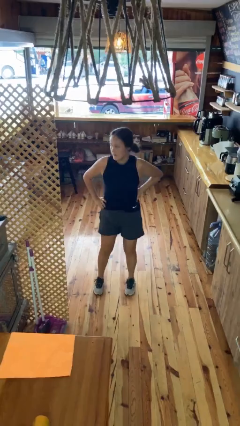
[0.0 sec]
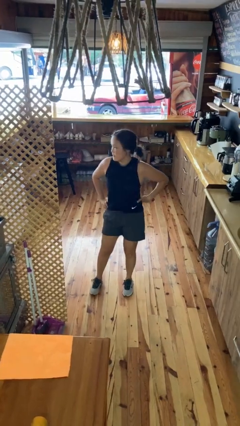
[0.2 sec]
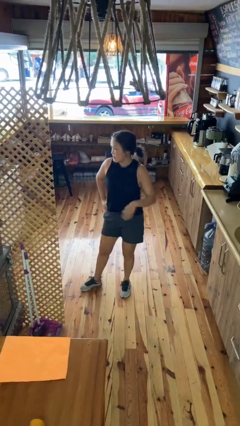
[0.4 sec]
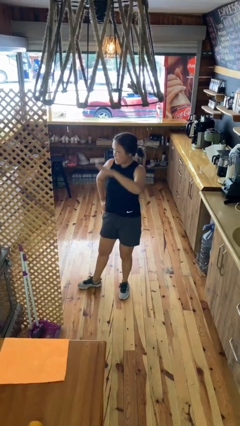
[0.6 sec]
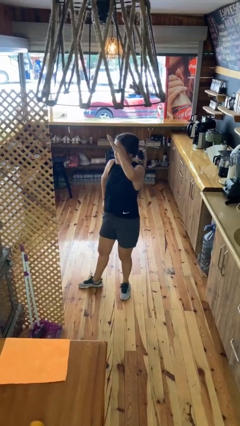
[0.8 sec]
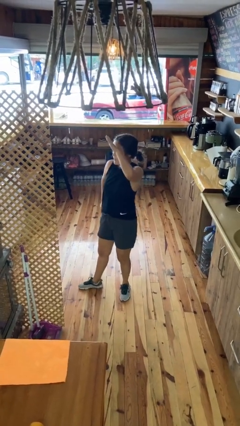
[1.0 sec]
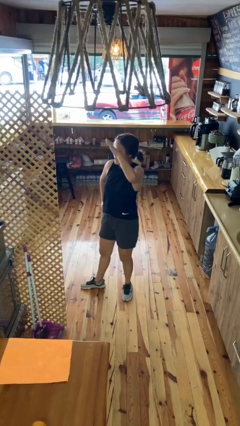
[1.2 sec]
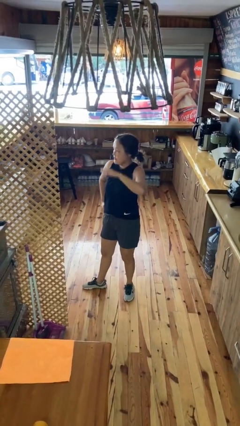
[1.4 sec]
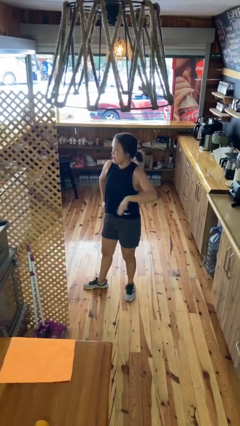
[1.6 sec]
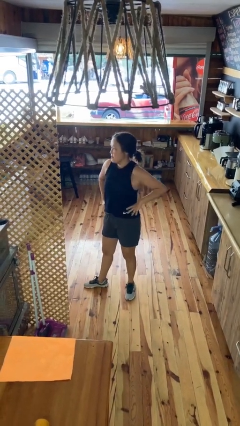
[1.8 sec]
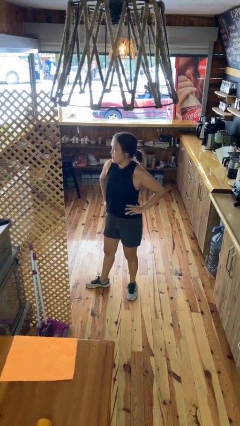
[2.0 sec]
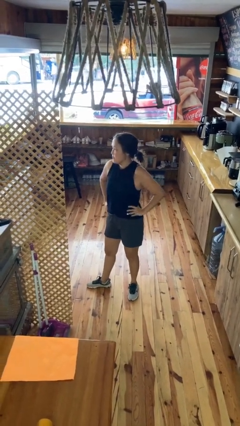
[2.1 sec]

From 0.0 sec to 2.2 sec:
person salutes

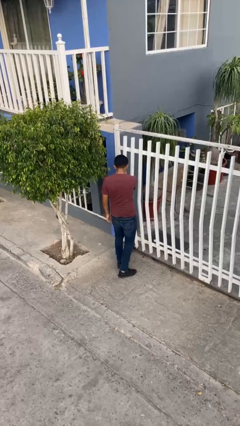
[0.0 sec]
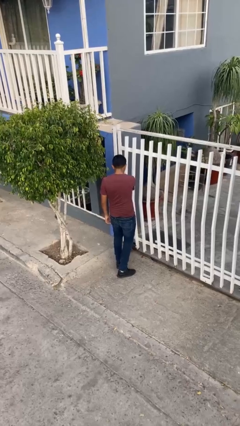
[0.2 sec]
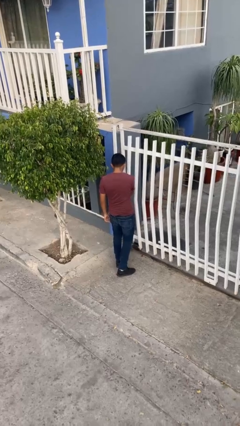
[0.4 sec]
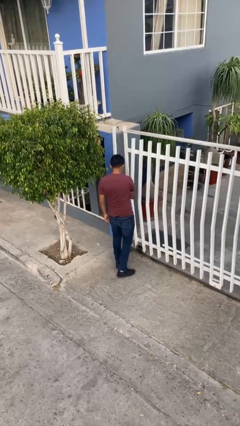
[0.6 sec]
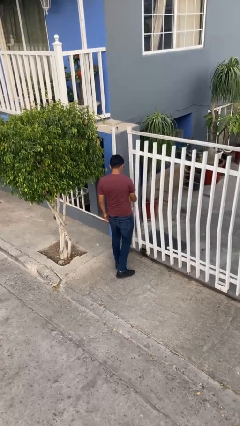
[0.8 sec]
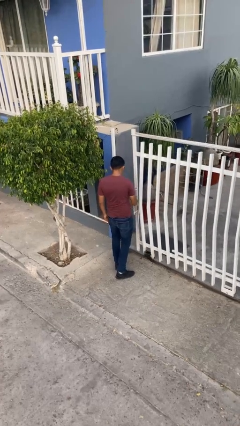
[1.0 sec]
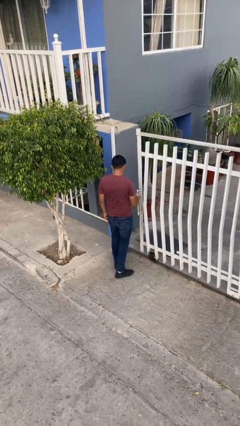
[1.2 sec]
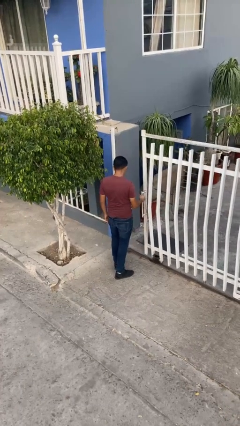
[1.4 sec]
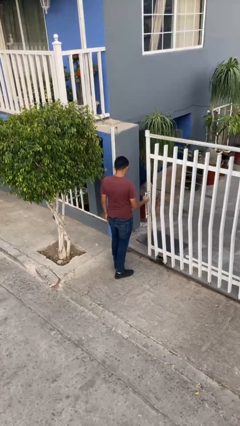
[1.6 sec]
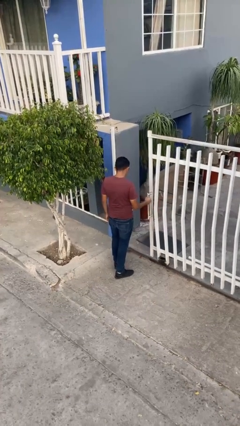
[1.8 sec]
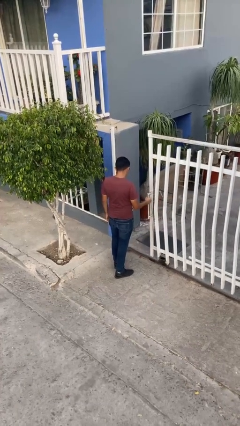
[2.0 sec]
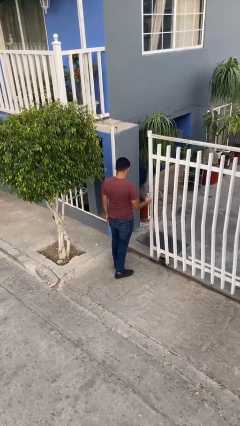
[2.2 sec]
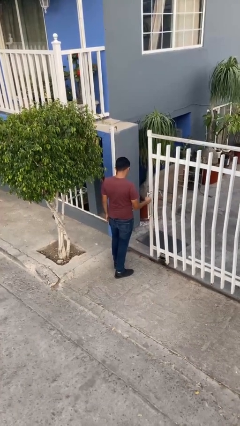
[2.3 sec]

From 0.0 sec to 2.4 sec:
person opens facility door

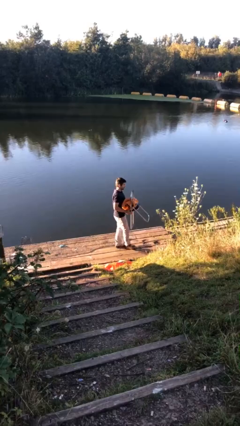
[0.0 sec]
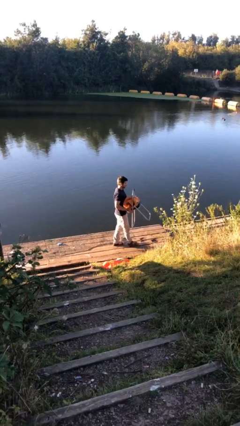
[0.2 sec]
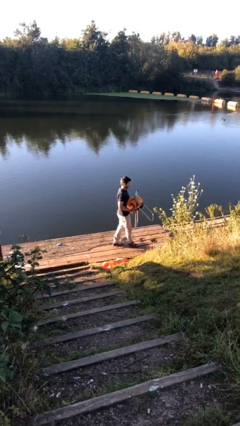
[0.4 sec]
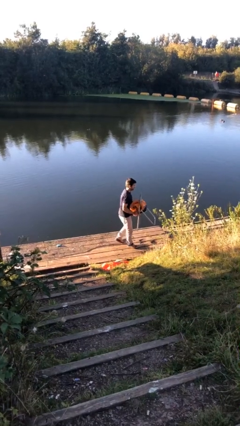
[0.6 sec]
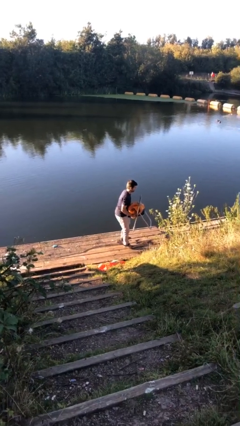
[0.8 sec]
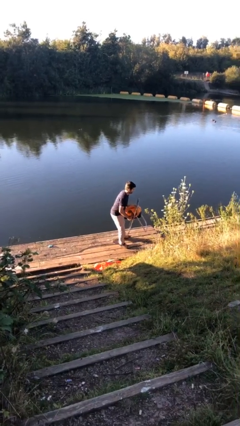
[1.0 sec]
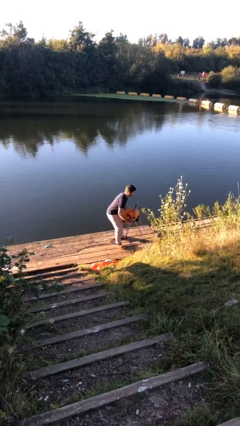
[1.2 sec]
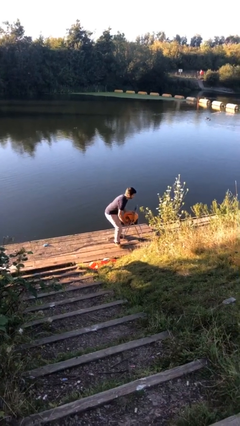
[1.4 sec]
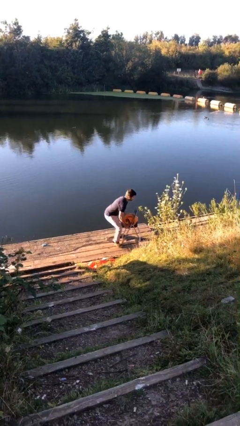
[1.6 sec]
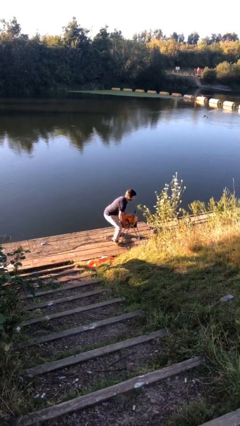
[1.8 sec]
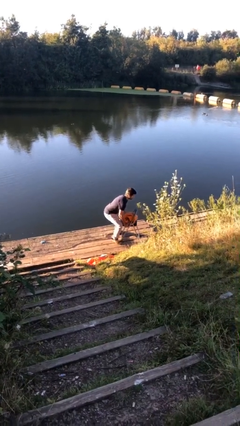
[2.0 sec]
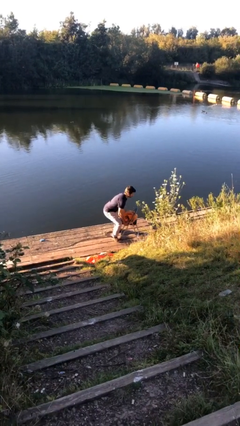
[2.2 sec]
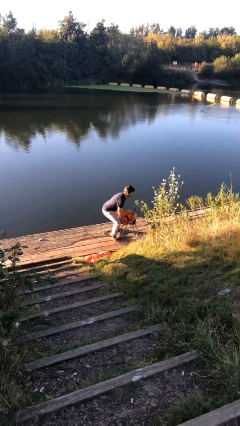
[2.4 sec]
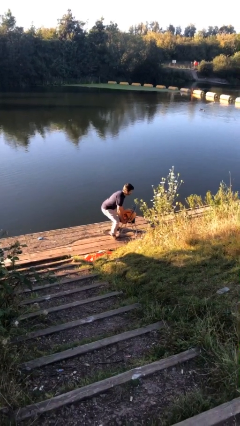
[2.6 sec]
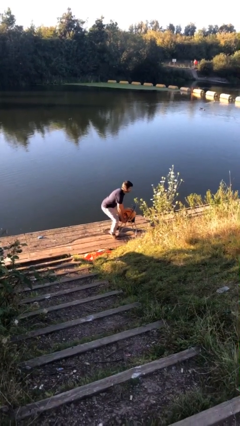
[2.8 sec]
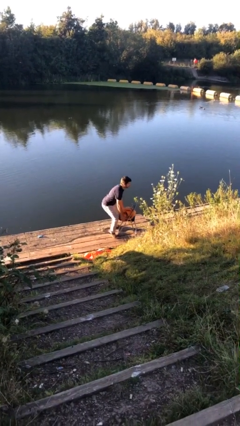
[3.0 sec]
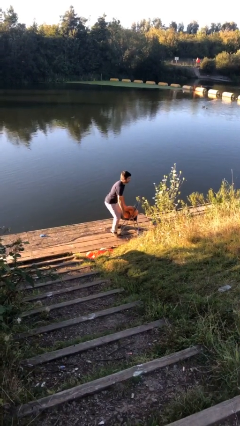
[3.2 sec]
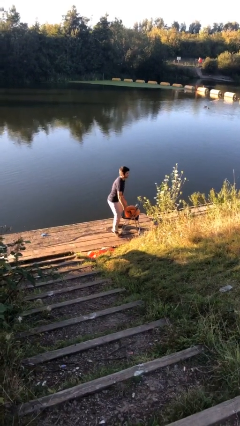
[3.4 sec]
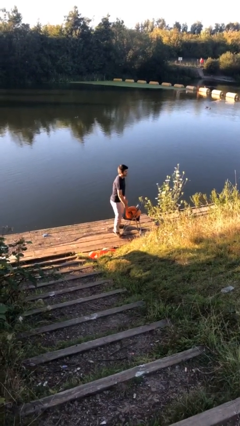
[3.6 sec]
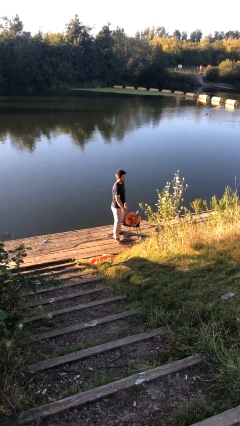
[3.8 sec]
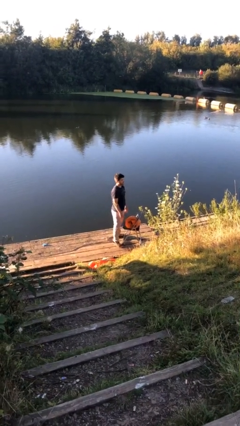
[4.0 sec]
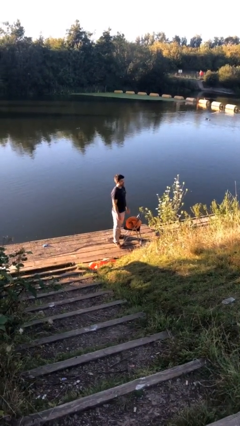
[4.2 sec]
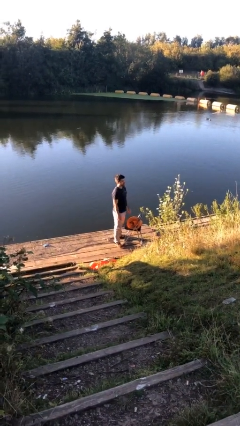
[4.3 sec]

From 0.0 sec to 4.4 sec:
person puts down object on floor

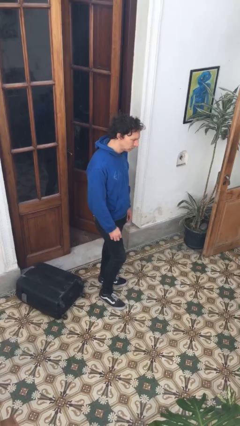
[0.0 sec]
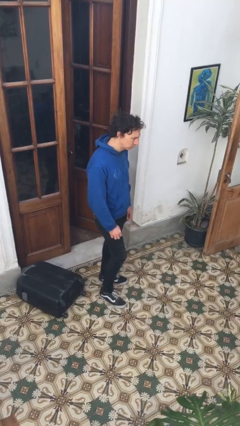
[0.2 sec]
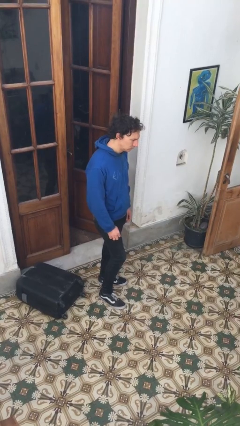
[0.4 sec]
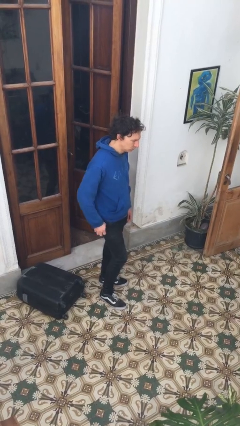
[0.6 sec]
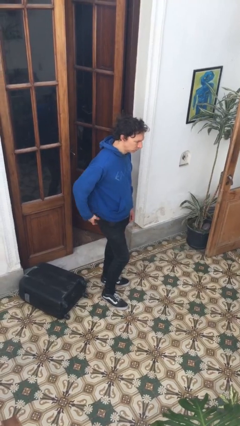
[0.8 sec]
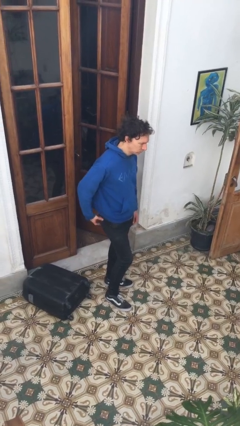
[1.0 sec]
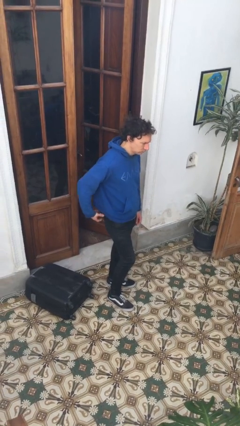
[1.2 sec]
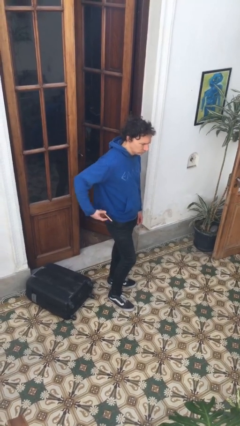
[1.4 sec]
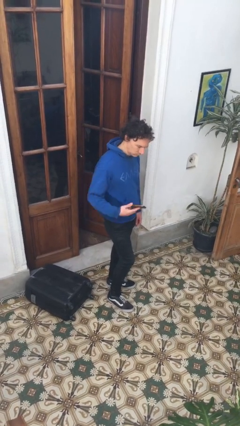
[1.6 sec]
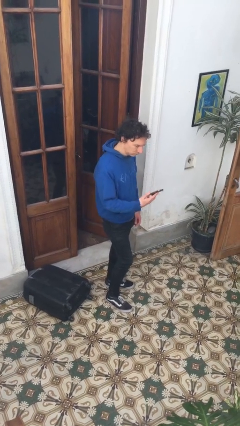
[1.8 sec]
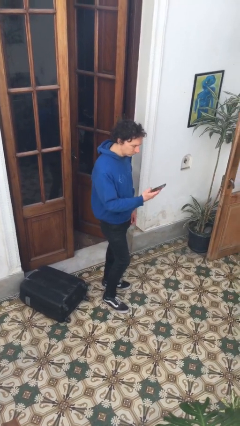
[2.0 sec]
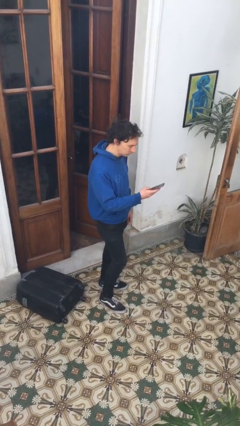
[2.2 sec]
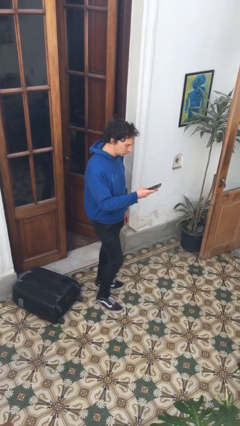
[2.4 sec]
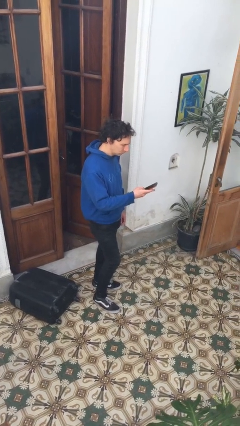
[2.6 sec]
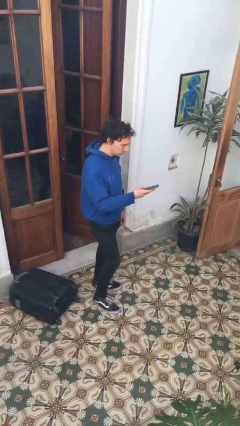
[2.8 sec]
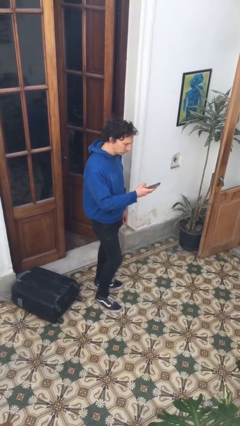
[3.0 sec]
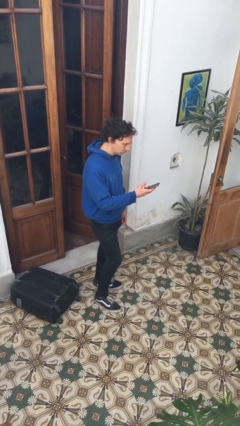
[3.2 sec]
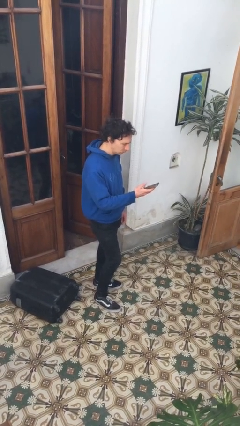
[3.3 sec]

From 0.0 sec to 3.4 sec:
person takes phone from pocket

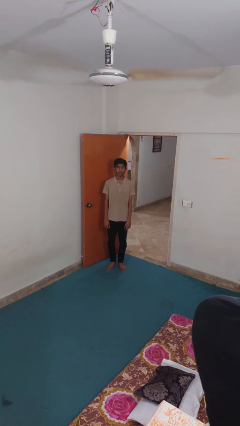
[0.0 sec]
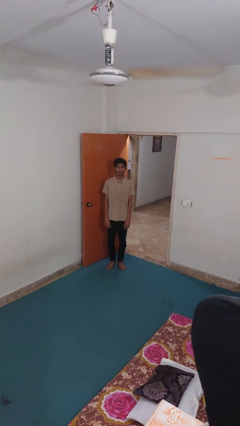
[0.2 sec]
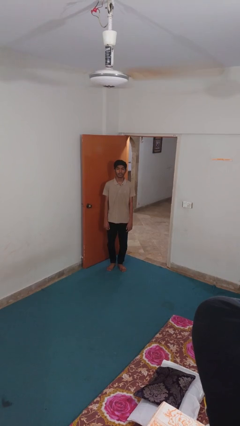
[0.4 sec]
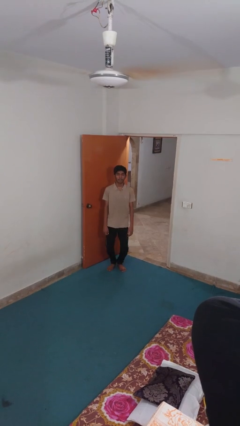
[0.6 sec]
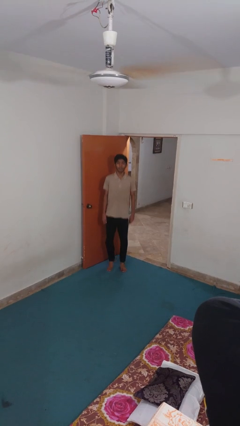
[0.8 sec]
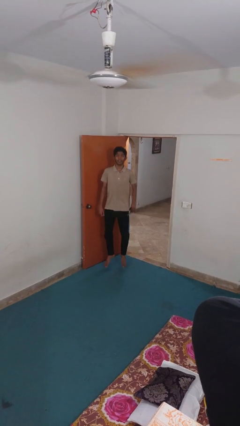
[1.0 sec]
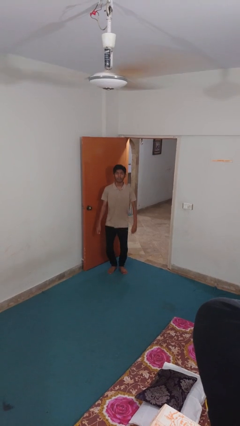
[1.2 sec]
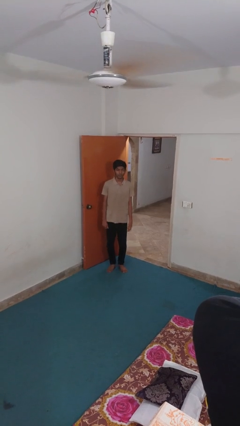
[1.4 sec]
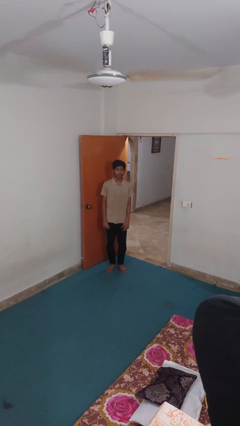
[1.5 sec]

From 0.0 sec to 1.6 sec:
person jumps

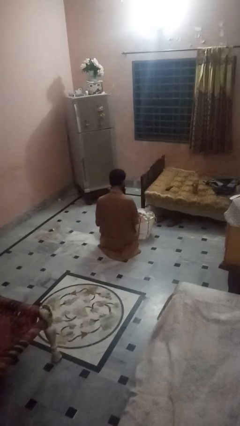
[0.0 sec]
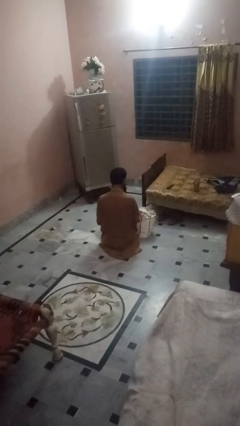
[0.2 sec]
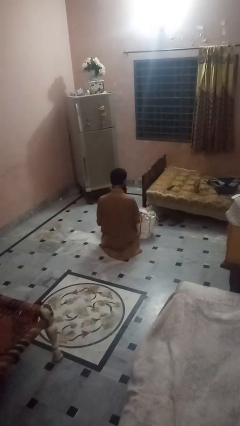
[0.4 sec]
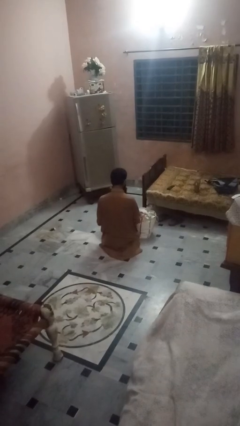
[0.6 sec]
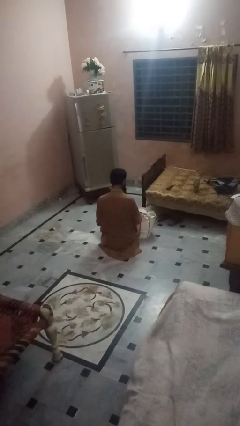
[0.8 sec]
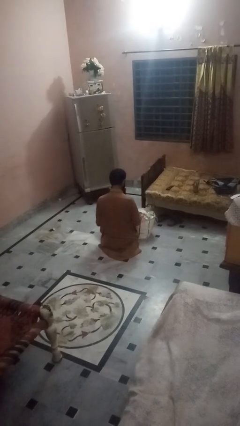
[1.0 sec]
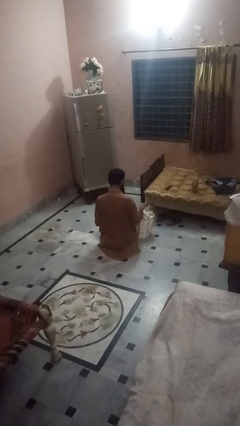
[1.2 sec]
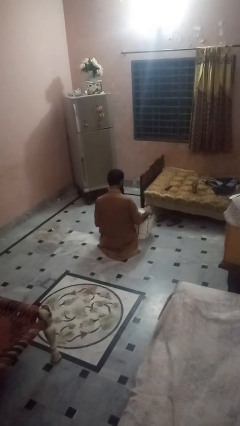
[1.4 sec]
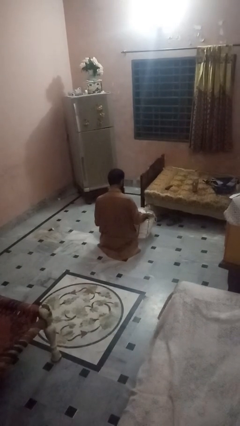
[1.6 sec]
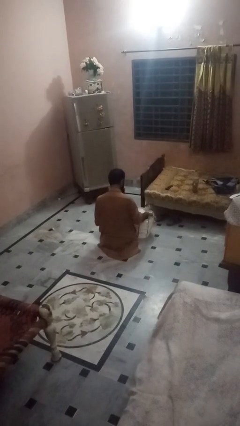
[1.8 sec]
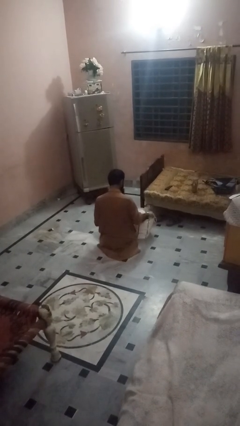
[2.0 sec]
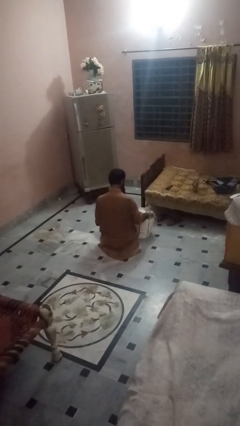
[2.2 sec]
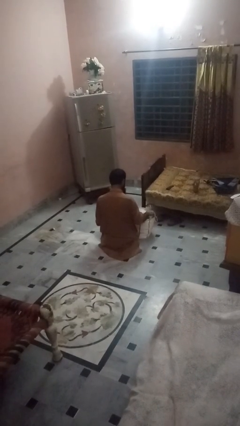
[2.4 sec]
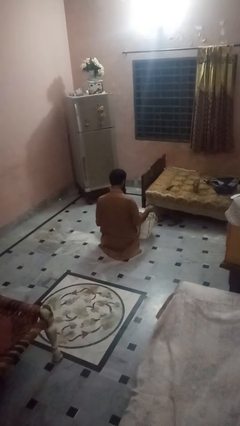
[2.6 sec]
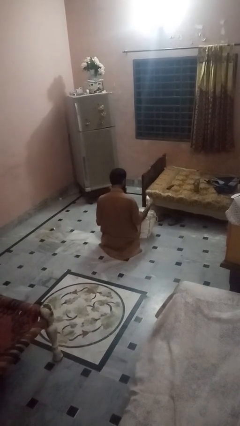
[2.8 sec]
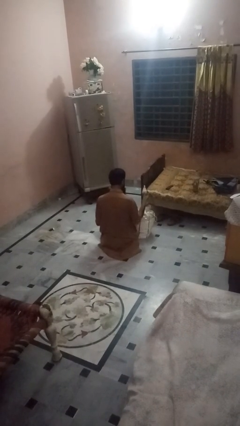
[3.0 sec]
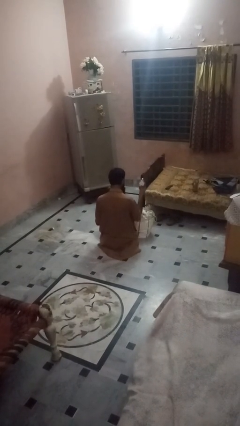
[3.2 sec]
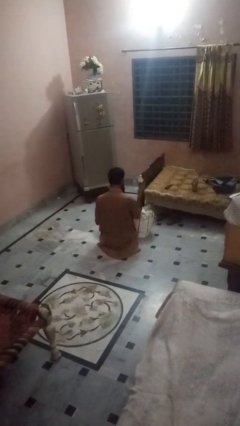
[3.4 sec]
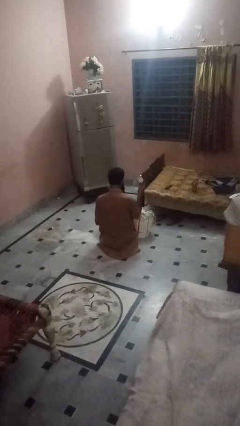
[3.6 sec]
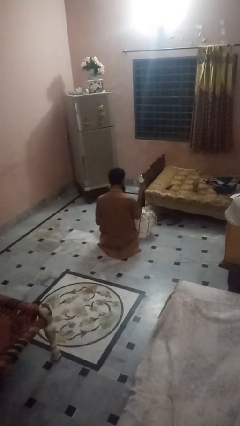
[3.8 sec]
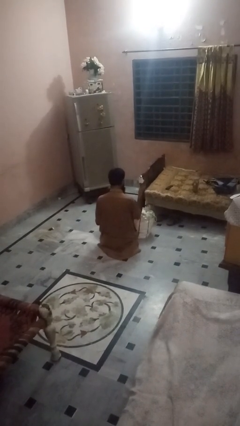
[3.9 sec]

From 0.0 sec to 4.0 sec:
person takes object from bag
